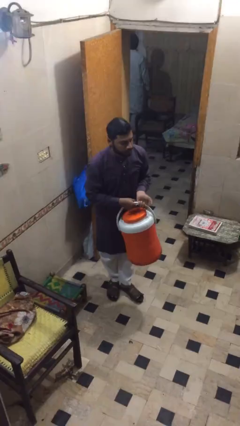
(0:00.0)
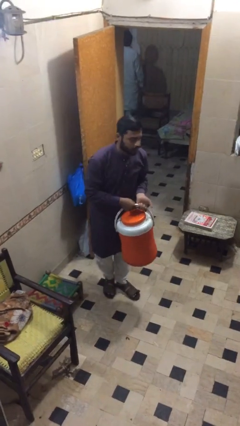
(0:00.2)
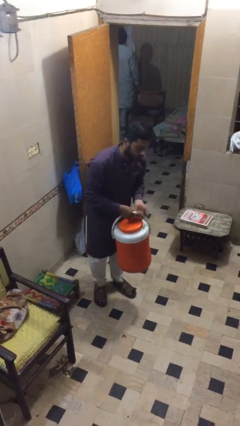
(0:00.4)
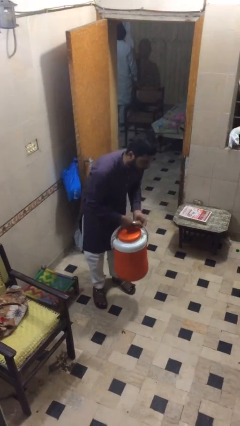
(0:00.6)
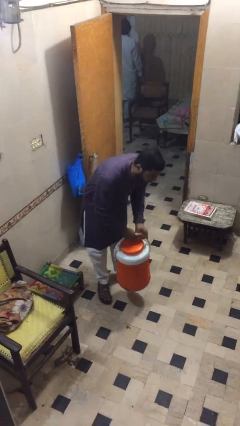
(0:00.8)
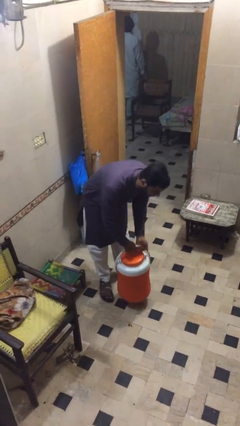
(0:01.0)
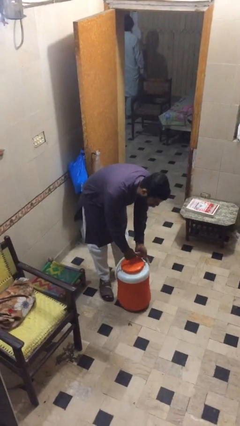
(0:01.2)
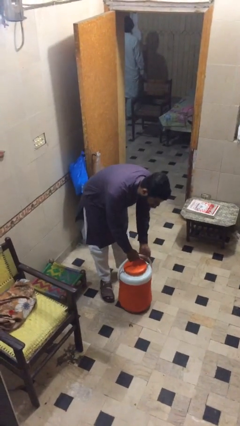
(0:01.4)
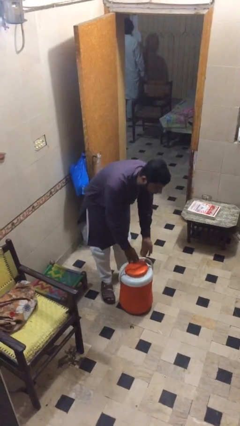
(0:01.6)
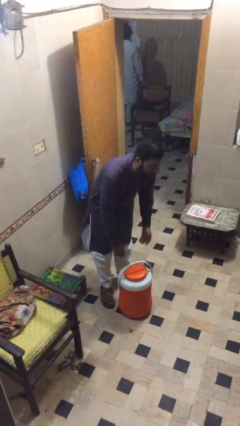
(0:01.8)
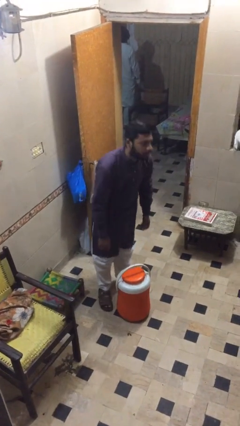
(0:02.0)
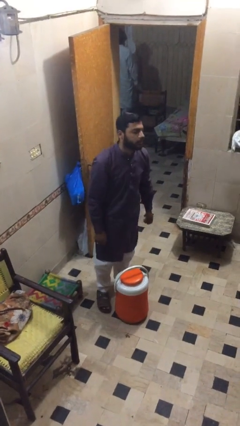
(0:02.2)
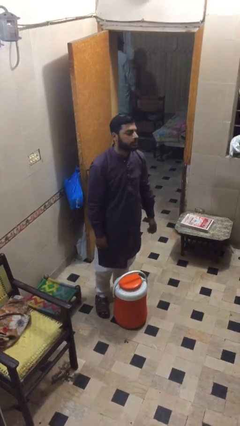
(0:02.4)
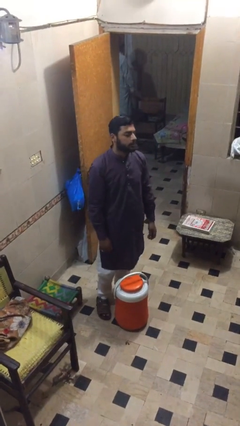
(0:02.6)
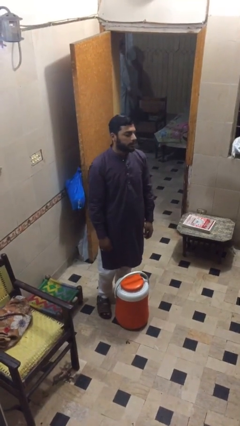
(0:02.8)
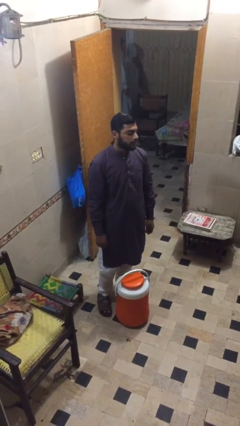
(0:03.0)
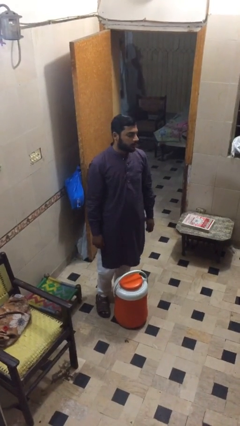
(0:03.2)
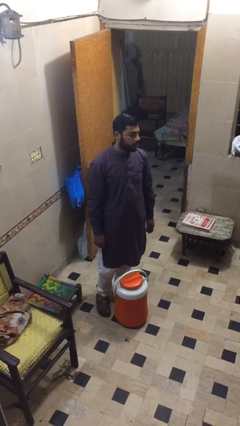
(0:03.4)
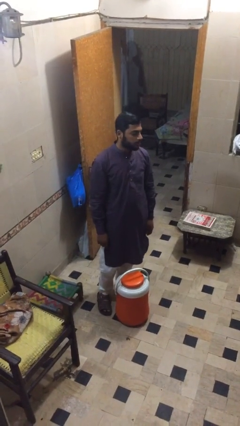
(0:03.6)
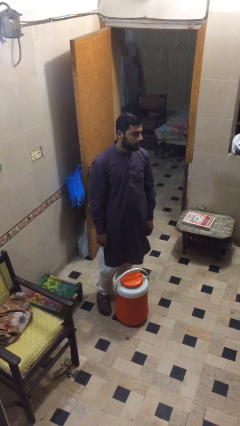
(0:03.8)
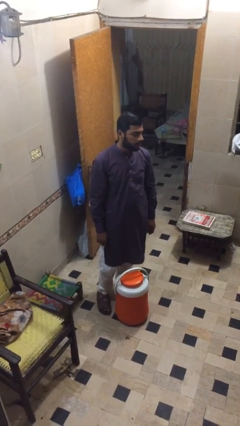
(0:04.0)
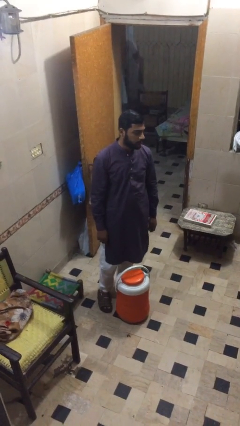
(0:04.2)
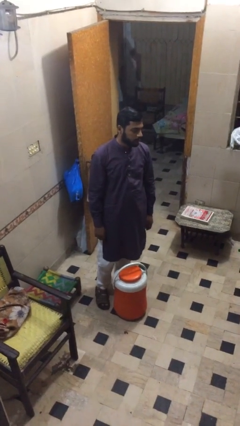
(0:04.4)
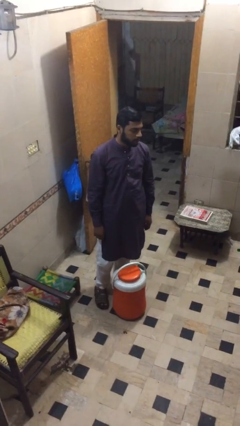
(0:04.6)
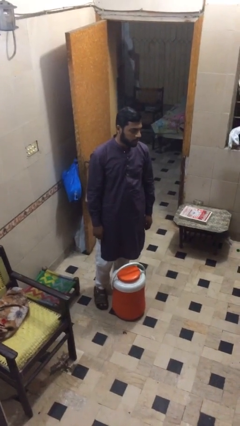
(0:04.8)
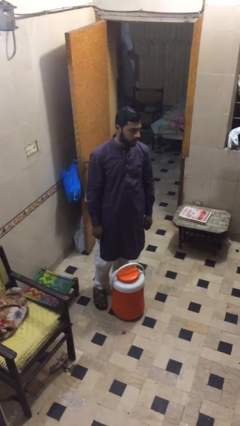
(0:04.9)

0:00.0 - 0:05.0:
person puts down object on floor

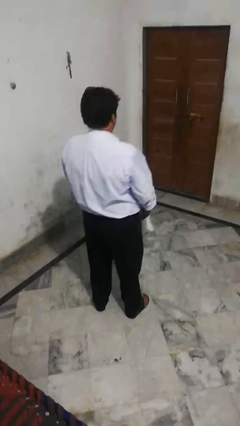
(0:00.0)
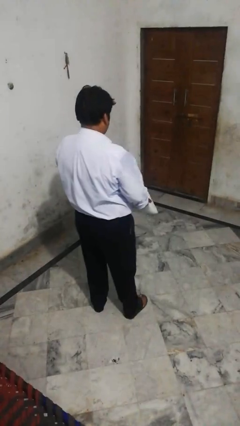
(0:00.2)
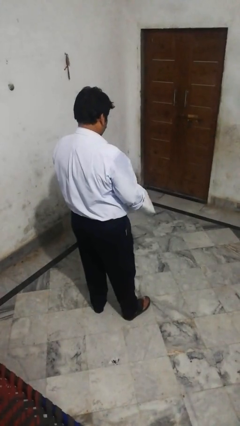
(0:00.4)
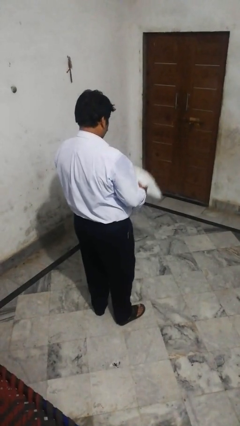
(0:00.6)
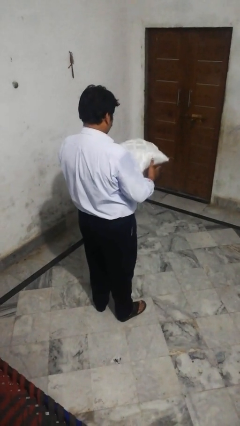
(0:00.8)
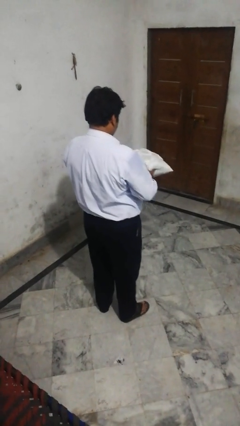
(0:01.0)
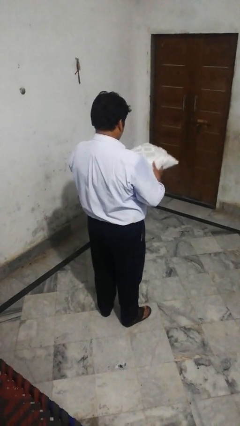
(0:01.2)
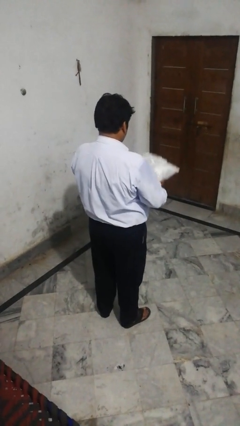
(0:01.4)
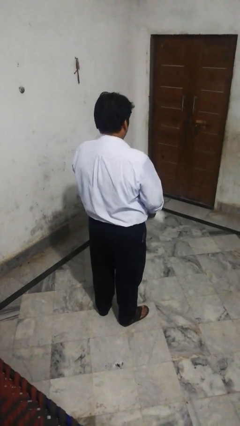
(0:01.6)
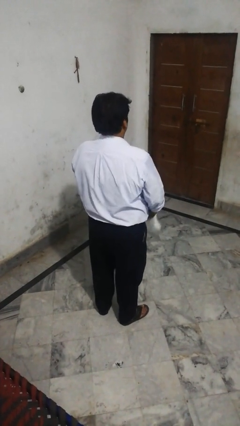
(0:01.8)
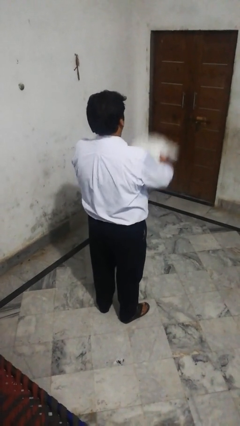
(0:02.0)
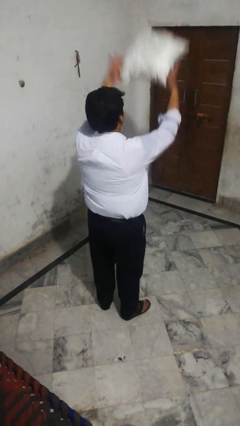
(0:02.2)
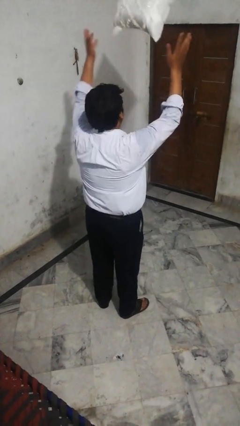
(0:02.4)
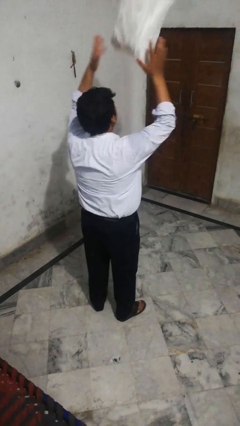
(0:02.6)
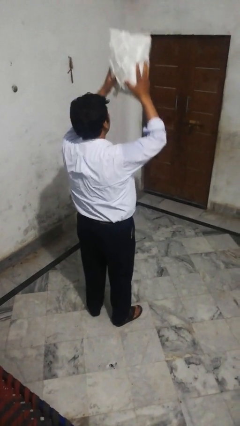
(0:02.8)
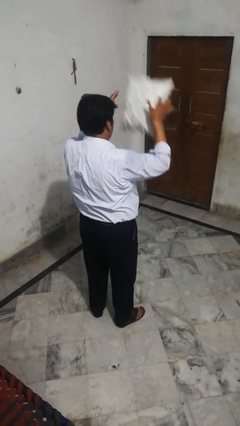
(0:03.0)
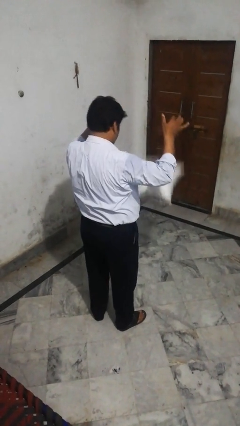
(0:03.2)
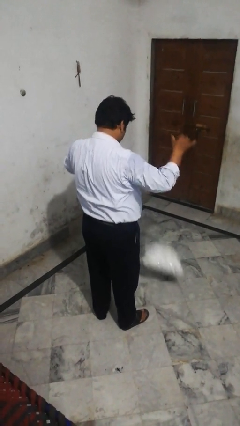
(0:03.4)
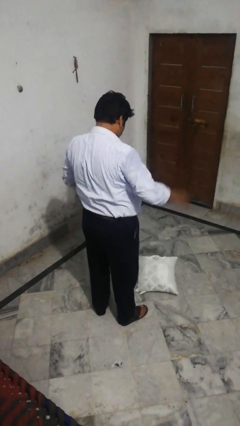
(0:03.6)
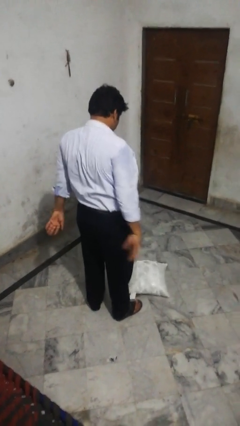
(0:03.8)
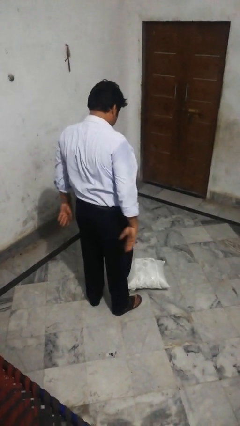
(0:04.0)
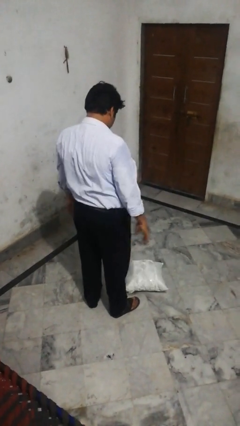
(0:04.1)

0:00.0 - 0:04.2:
person throws object into air

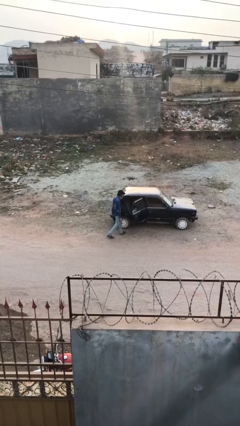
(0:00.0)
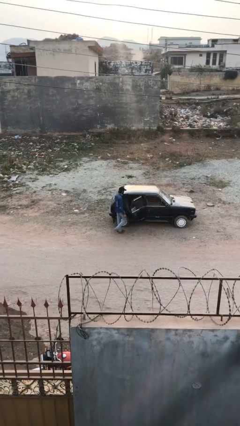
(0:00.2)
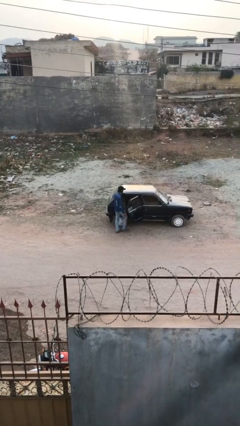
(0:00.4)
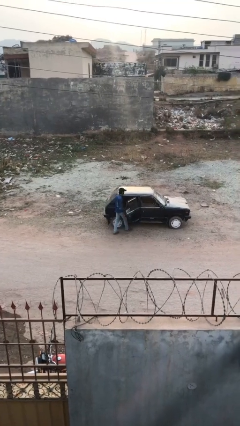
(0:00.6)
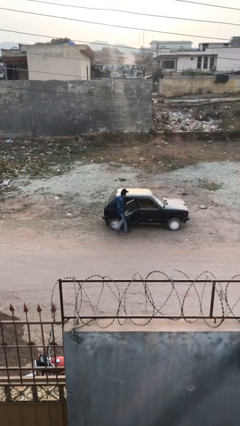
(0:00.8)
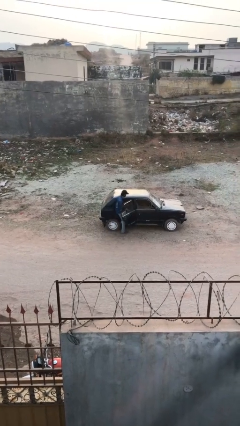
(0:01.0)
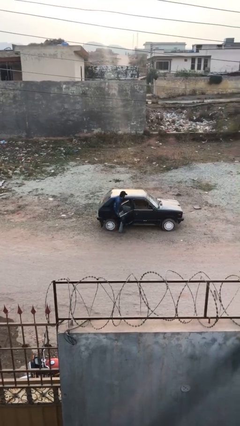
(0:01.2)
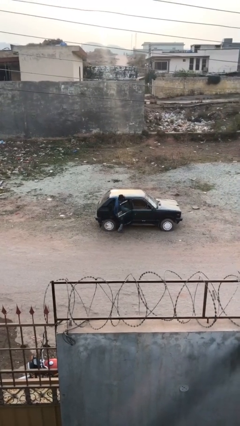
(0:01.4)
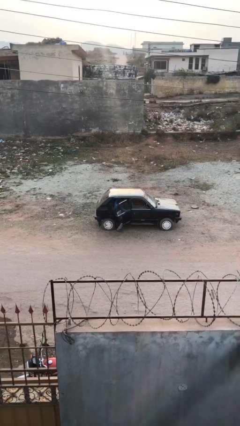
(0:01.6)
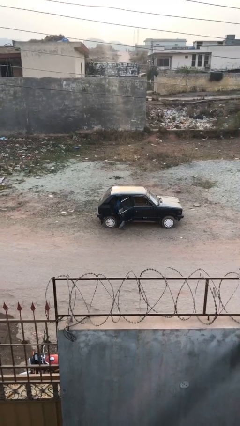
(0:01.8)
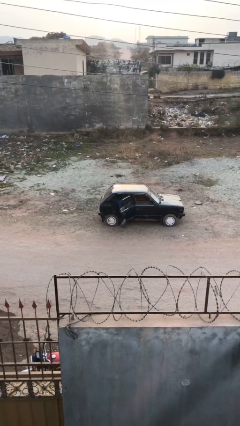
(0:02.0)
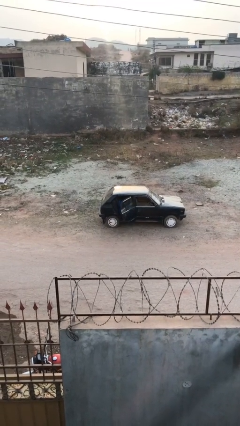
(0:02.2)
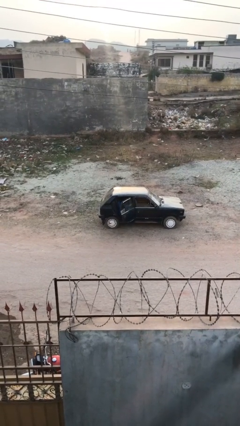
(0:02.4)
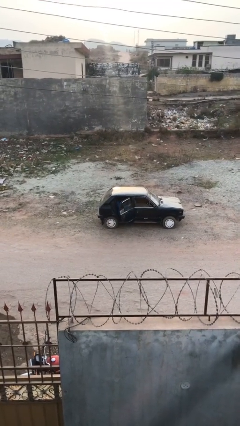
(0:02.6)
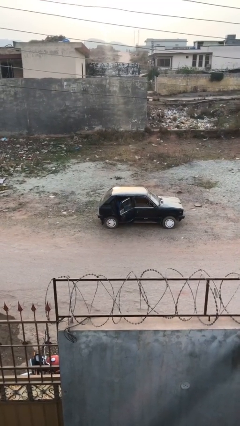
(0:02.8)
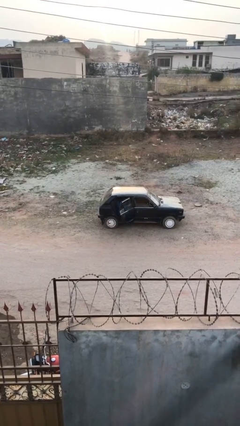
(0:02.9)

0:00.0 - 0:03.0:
person enters car

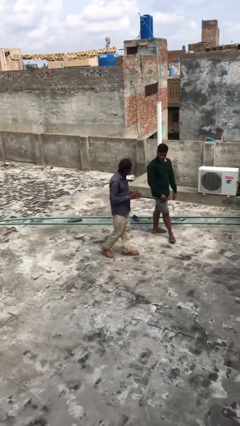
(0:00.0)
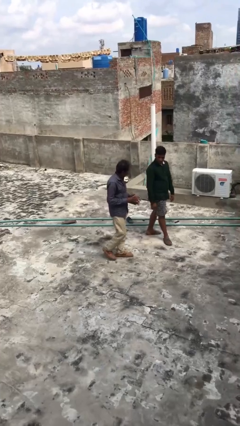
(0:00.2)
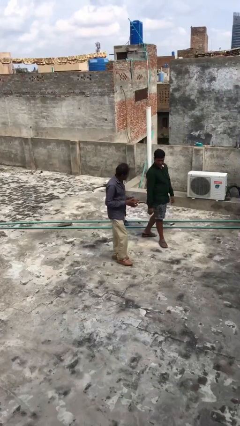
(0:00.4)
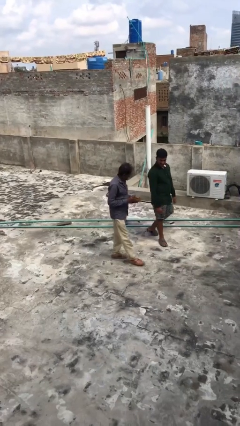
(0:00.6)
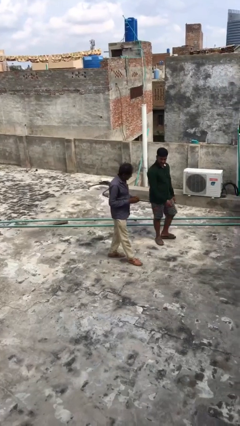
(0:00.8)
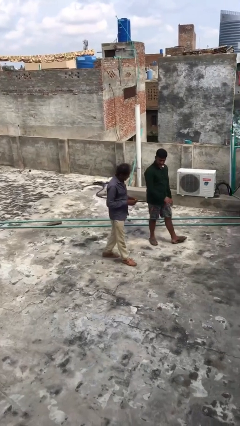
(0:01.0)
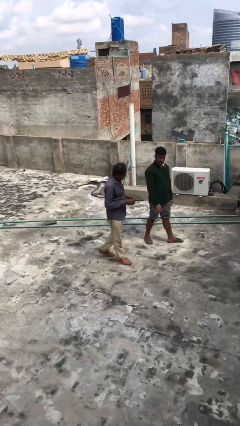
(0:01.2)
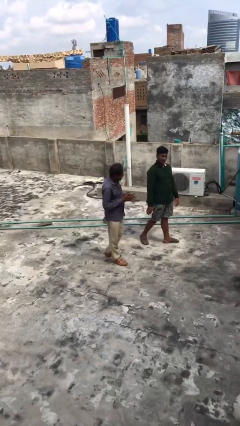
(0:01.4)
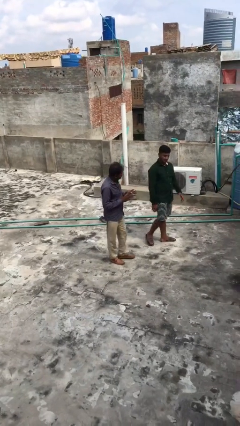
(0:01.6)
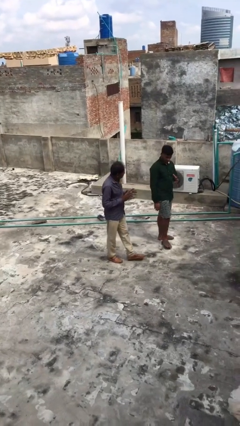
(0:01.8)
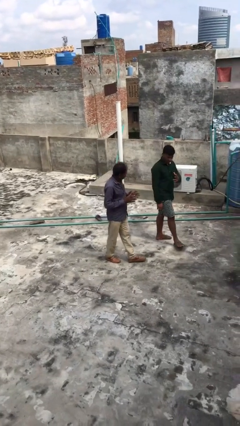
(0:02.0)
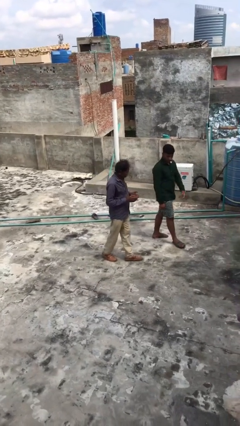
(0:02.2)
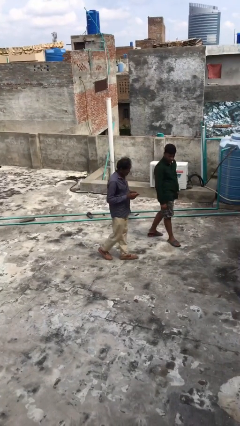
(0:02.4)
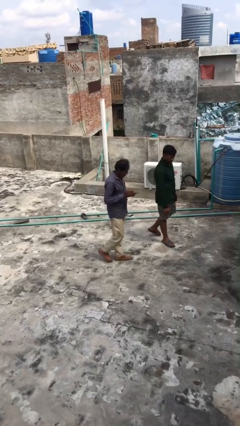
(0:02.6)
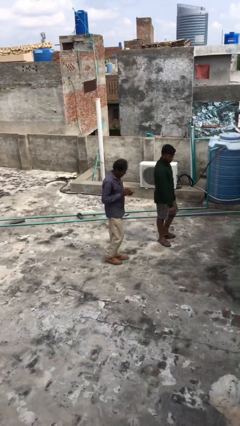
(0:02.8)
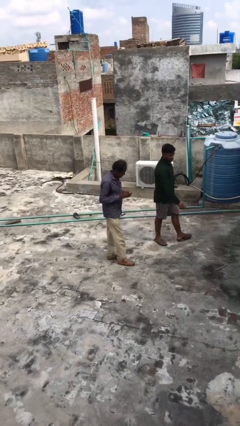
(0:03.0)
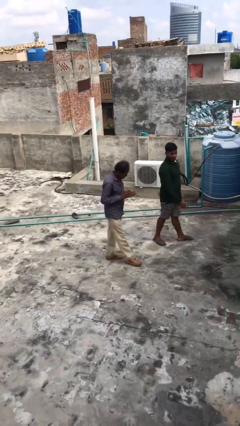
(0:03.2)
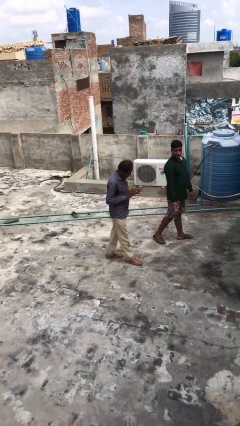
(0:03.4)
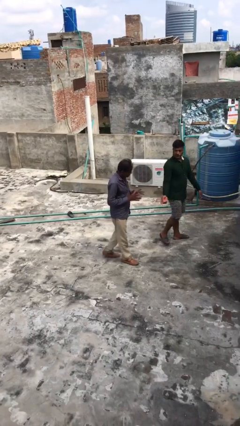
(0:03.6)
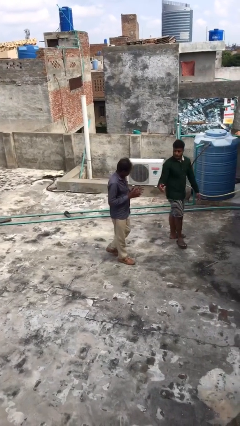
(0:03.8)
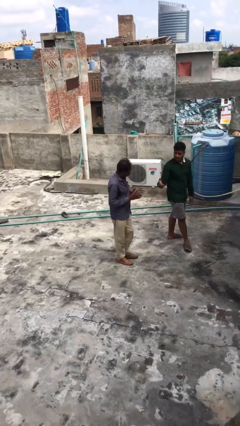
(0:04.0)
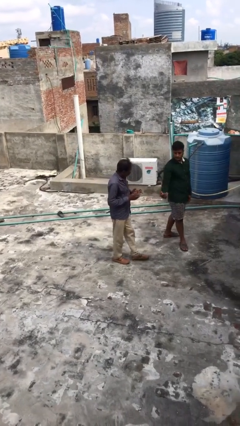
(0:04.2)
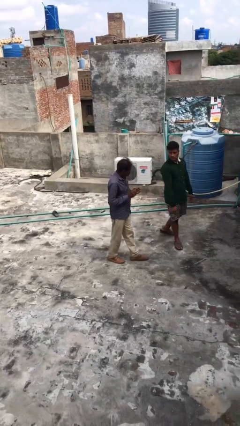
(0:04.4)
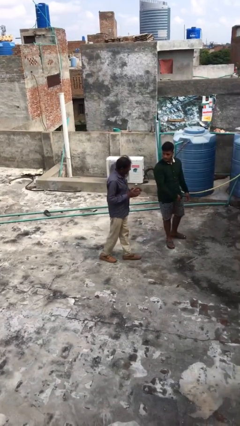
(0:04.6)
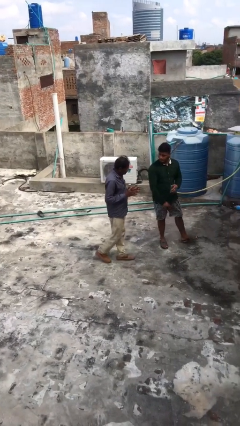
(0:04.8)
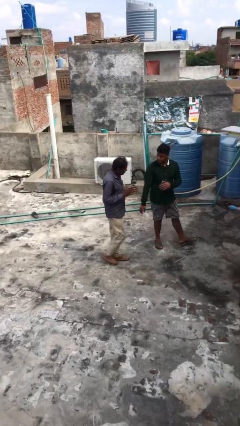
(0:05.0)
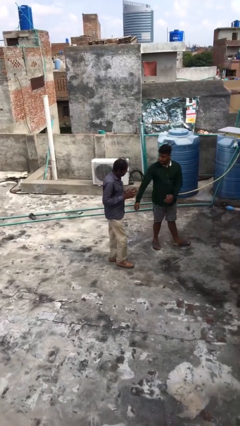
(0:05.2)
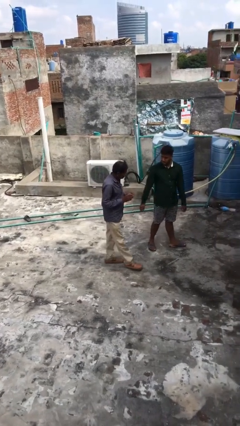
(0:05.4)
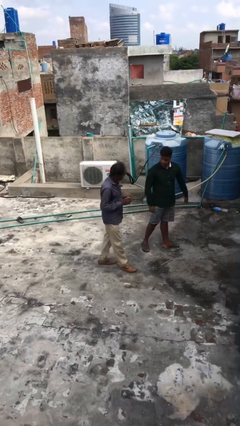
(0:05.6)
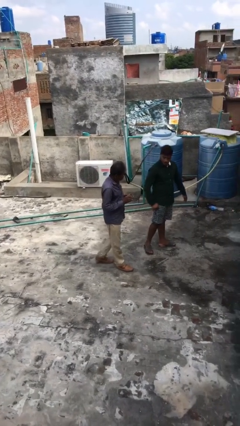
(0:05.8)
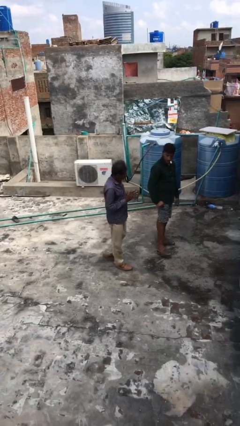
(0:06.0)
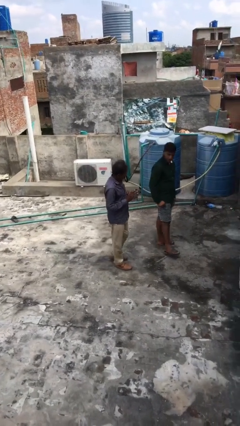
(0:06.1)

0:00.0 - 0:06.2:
person talks to person
